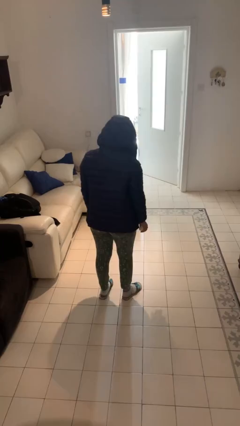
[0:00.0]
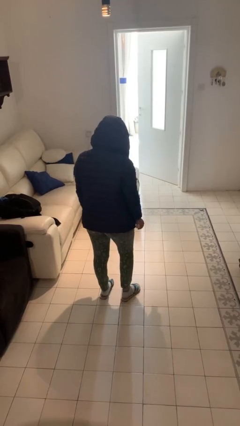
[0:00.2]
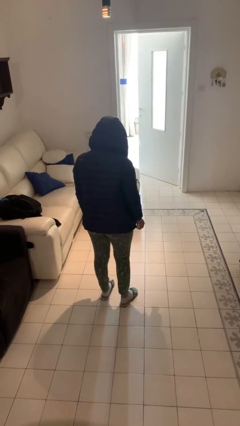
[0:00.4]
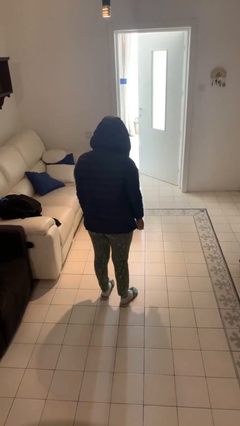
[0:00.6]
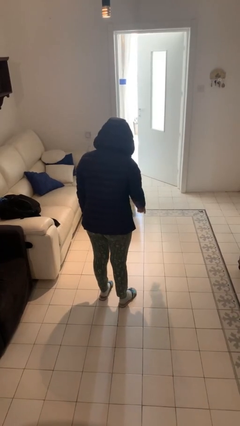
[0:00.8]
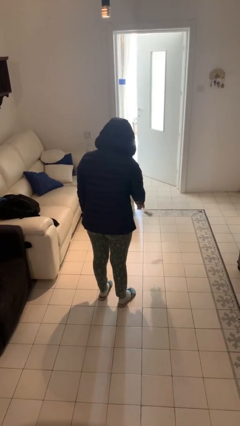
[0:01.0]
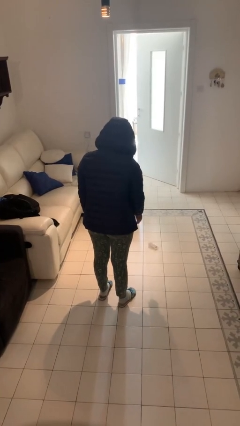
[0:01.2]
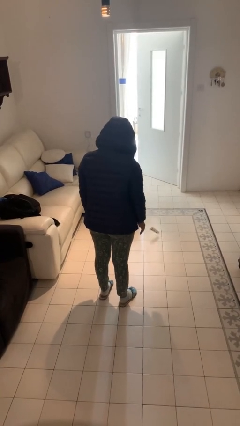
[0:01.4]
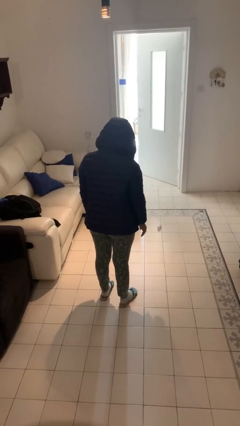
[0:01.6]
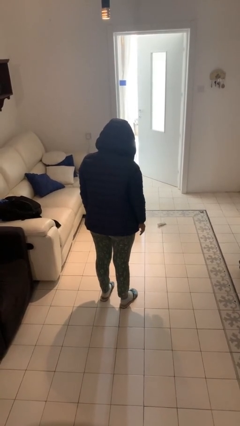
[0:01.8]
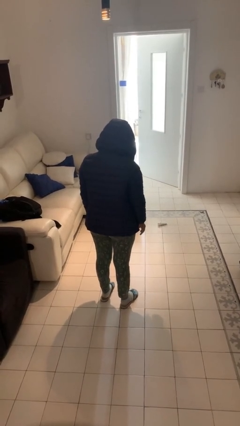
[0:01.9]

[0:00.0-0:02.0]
person throws object to ground

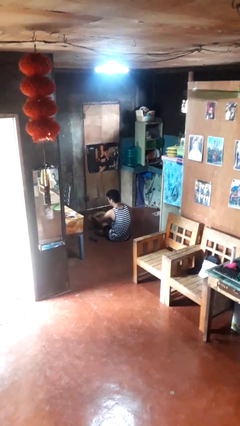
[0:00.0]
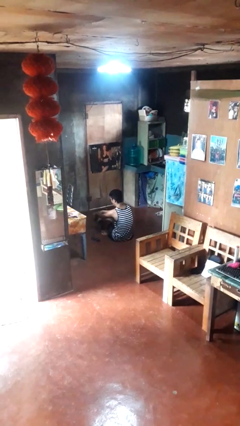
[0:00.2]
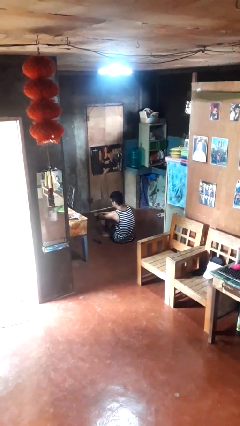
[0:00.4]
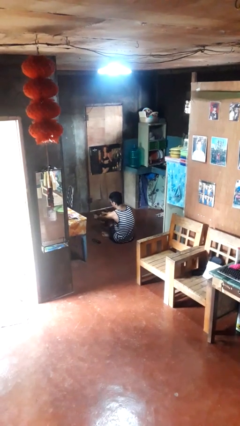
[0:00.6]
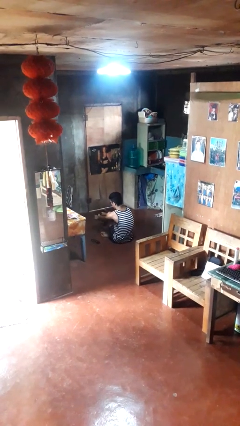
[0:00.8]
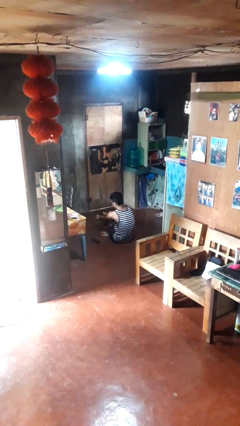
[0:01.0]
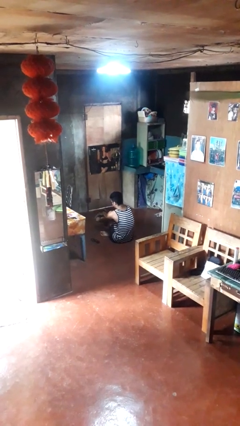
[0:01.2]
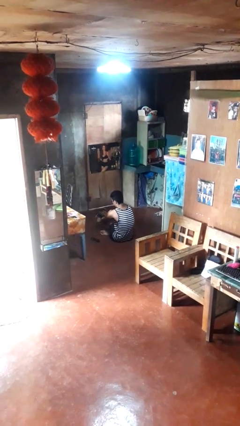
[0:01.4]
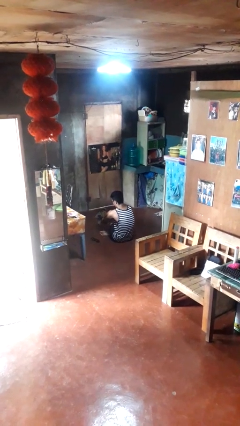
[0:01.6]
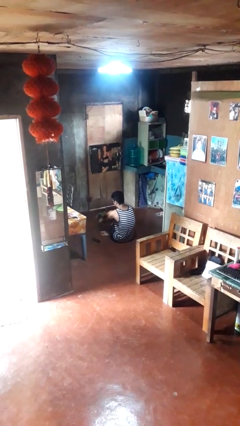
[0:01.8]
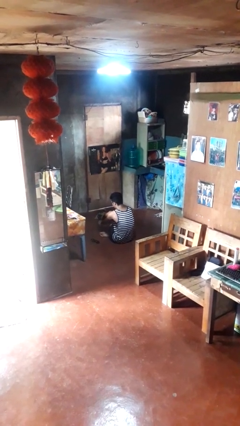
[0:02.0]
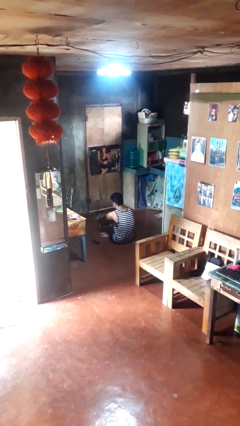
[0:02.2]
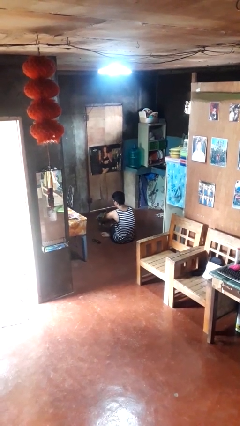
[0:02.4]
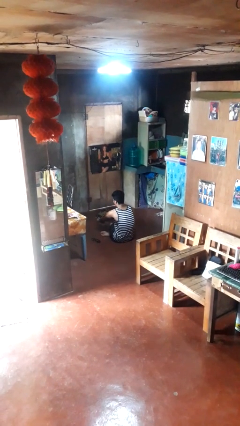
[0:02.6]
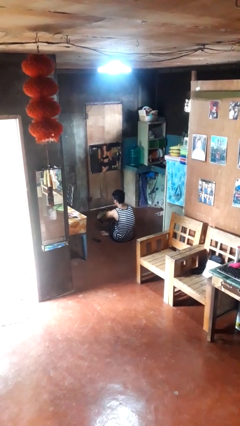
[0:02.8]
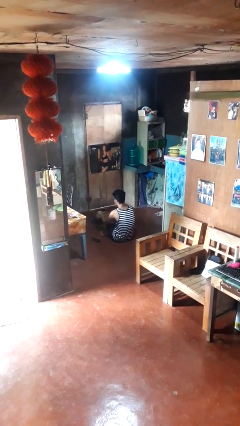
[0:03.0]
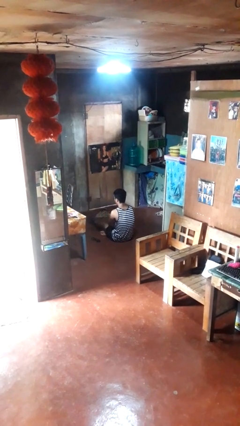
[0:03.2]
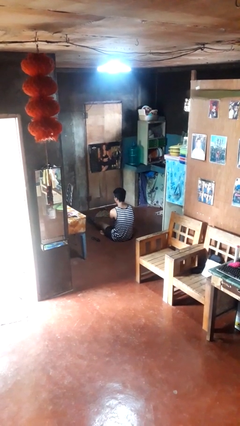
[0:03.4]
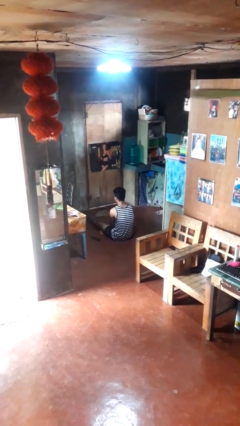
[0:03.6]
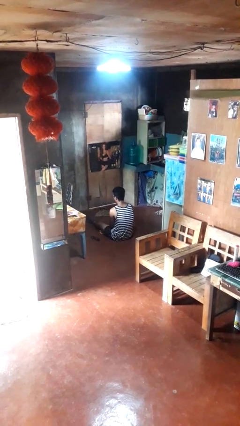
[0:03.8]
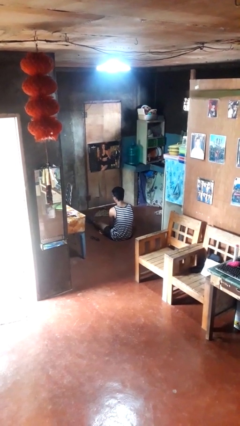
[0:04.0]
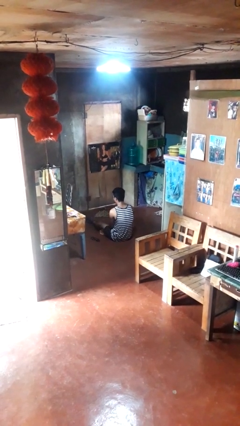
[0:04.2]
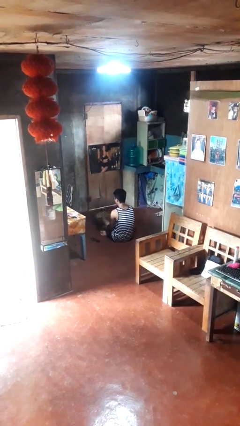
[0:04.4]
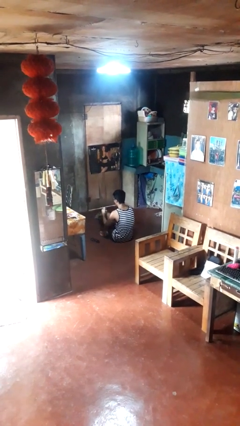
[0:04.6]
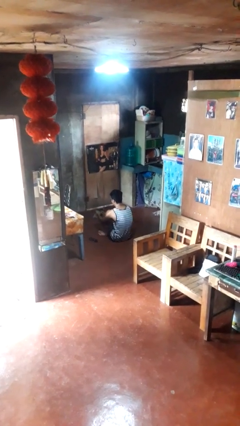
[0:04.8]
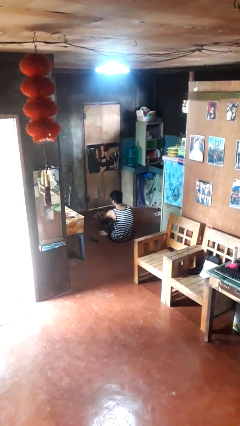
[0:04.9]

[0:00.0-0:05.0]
person puts on socks

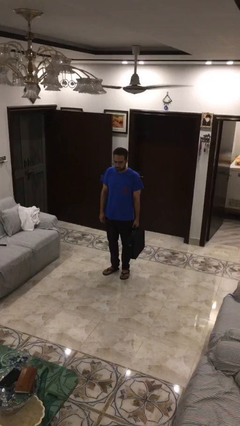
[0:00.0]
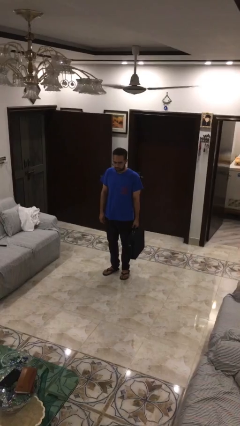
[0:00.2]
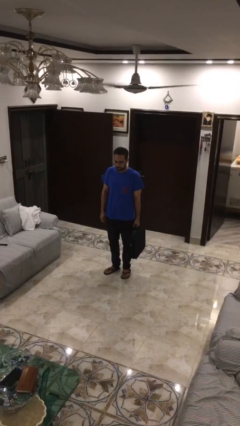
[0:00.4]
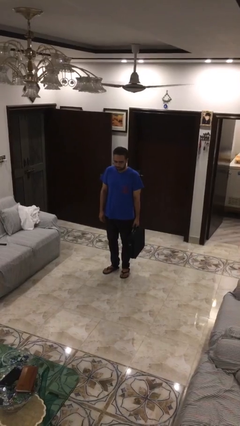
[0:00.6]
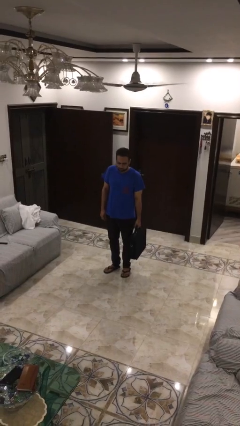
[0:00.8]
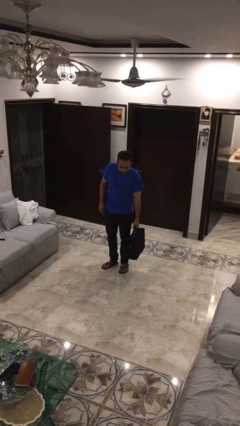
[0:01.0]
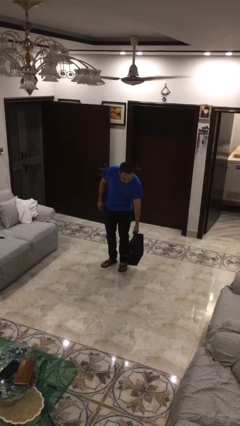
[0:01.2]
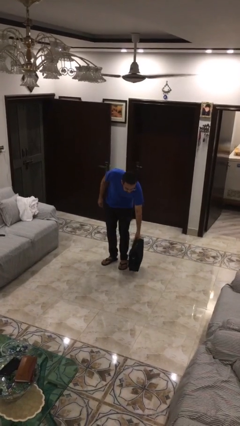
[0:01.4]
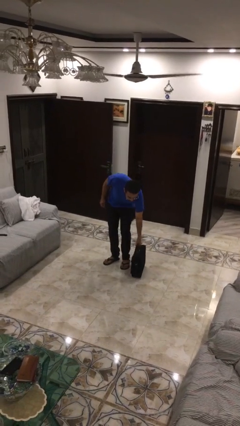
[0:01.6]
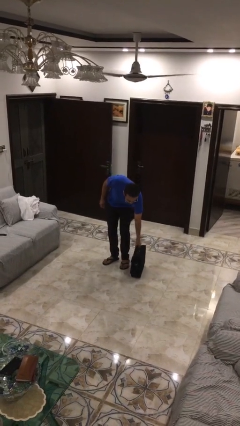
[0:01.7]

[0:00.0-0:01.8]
person puts down object on floor

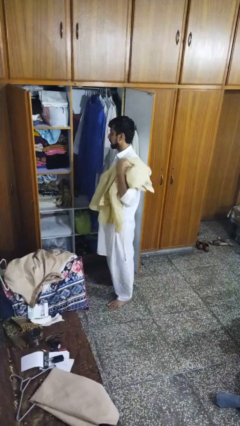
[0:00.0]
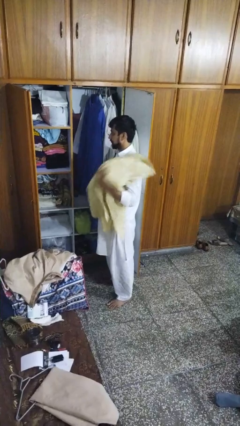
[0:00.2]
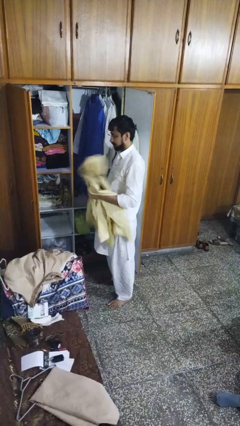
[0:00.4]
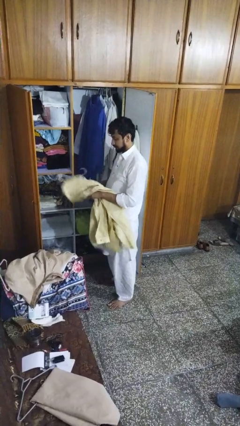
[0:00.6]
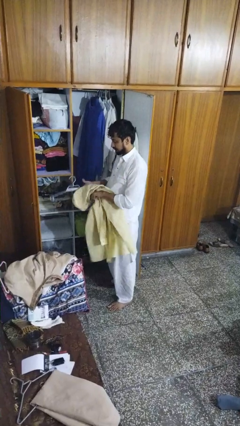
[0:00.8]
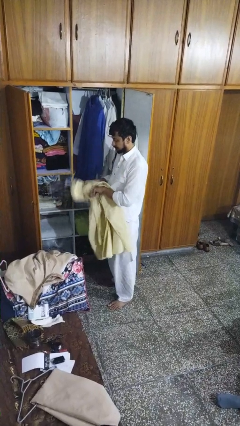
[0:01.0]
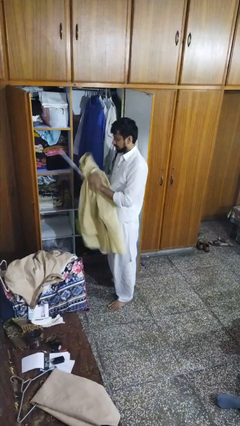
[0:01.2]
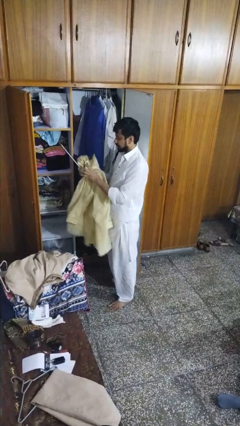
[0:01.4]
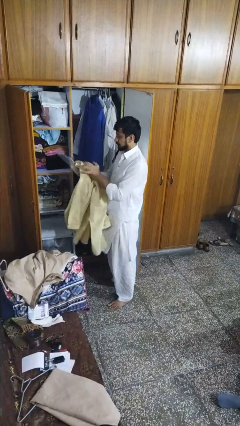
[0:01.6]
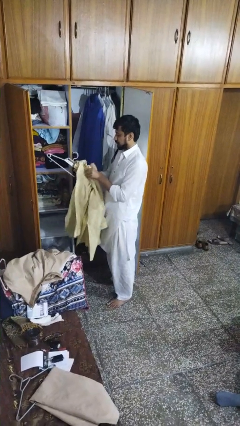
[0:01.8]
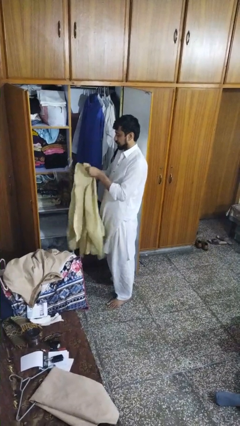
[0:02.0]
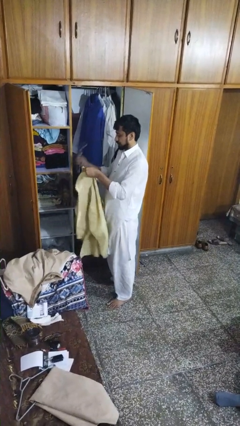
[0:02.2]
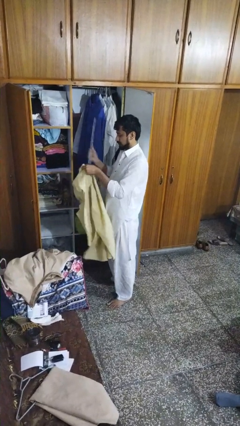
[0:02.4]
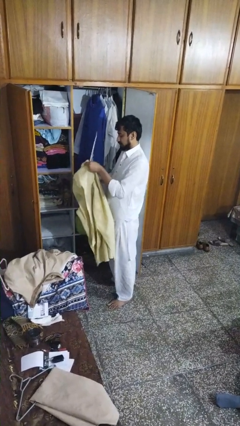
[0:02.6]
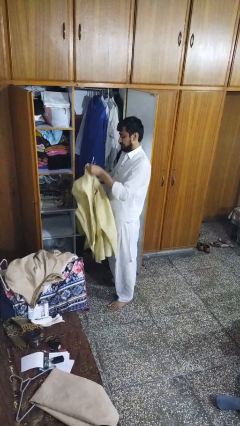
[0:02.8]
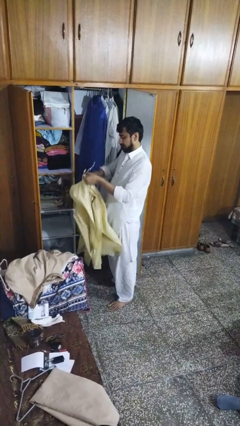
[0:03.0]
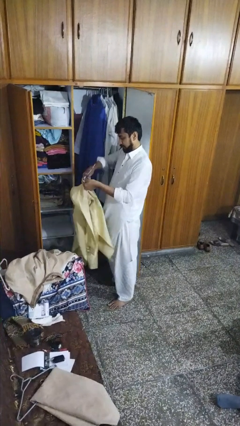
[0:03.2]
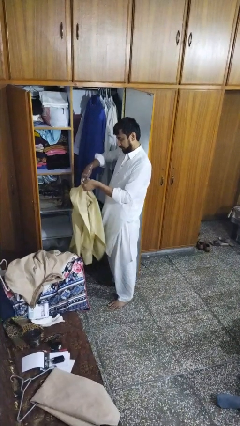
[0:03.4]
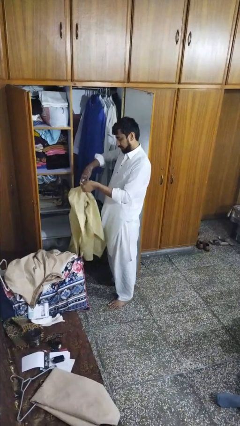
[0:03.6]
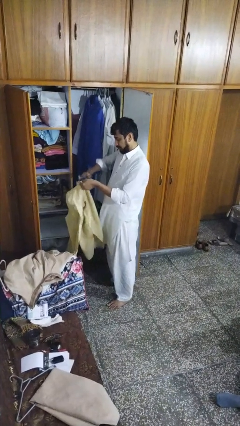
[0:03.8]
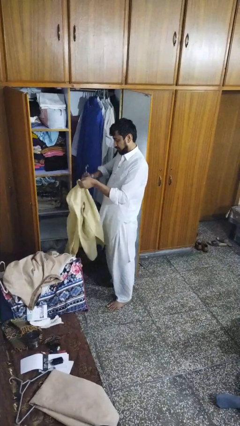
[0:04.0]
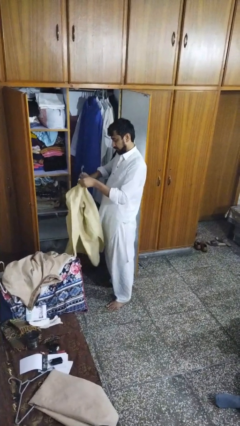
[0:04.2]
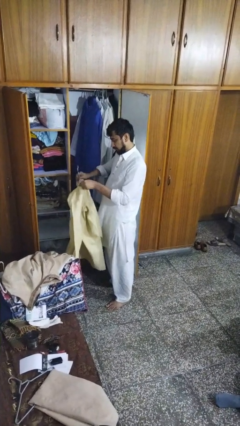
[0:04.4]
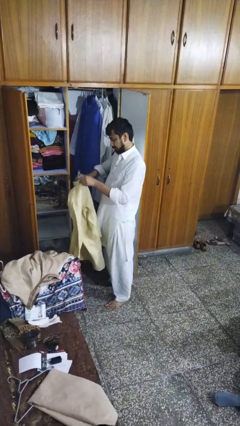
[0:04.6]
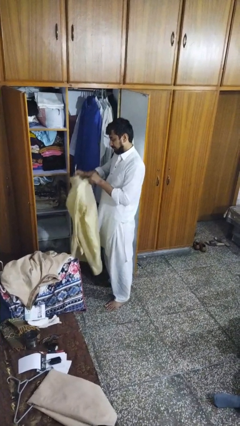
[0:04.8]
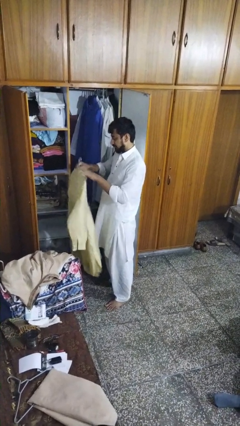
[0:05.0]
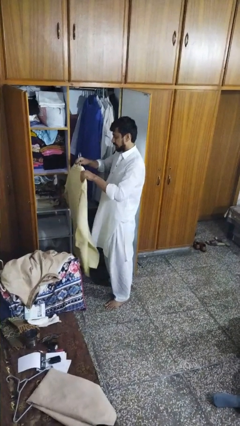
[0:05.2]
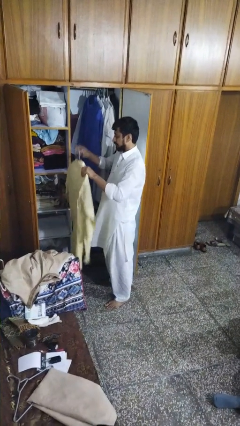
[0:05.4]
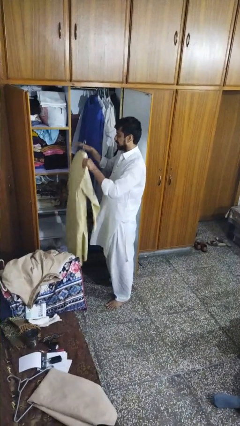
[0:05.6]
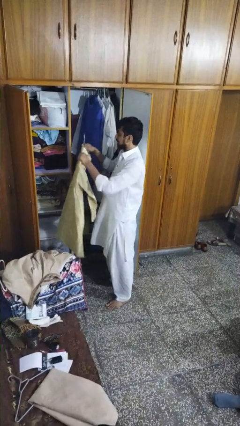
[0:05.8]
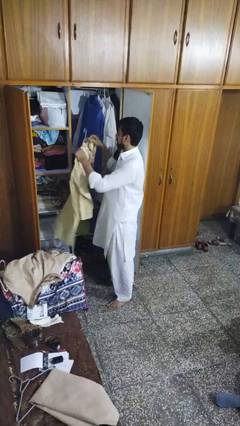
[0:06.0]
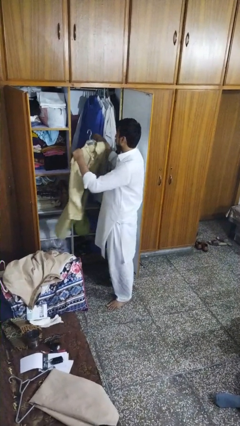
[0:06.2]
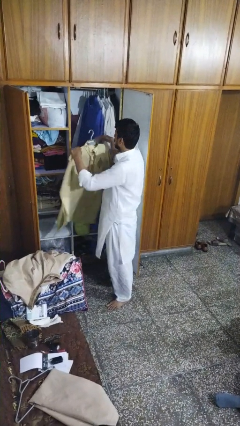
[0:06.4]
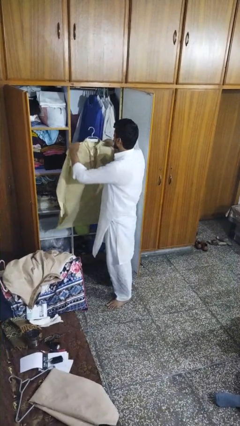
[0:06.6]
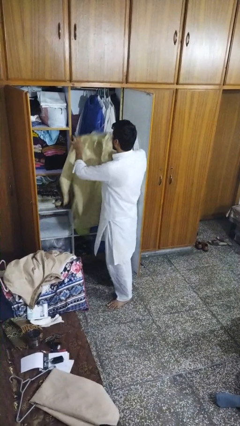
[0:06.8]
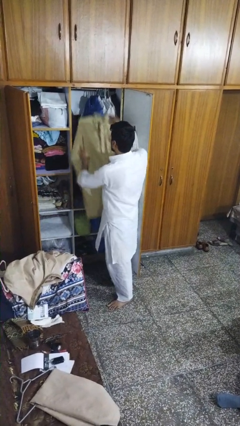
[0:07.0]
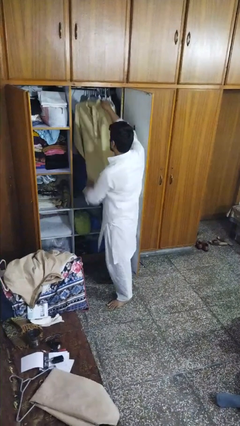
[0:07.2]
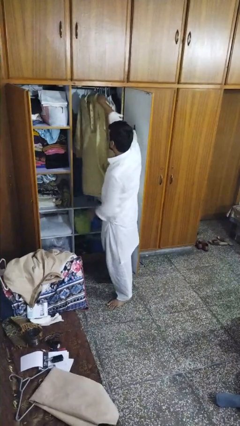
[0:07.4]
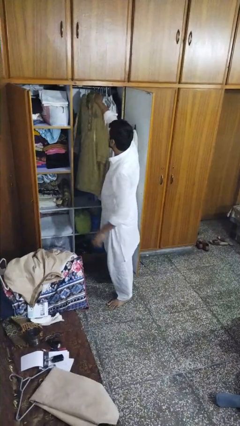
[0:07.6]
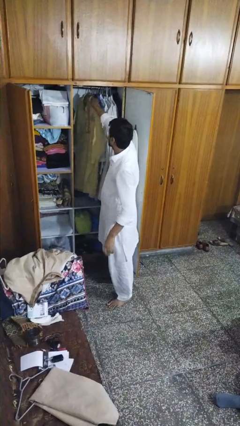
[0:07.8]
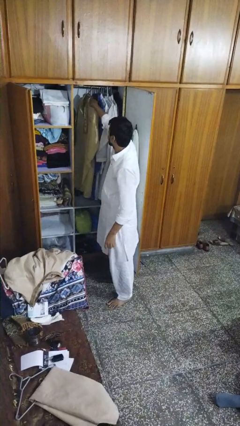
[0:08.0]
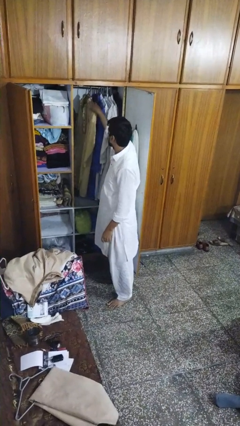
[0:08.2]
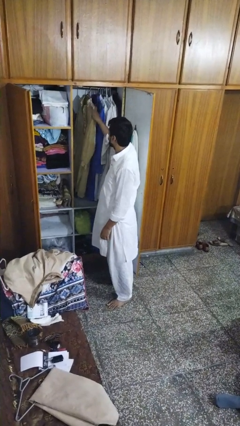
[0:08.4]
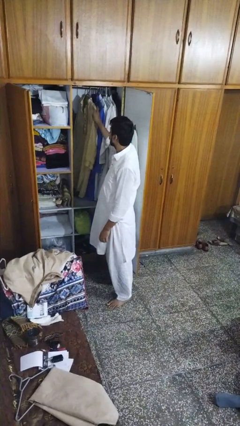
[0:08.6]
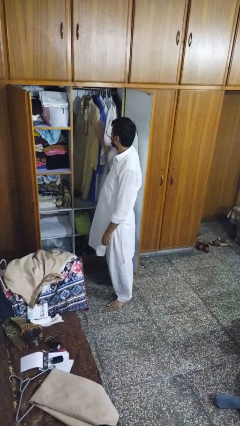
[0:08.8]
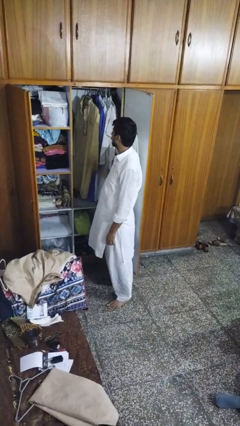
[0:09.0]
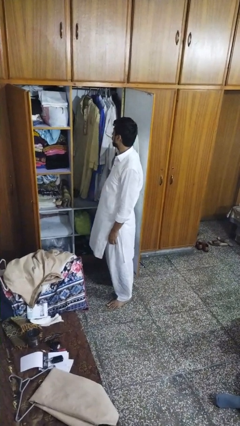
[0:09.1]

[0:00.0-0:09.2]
person puts clothes into closet

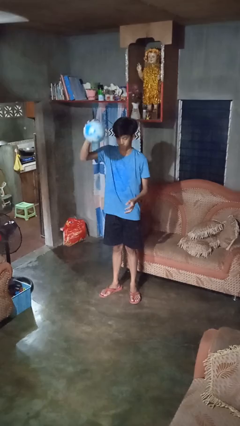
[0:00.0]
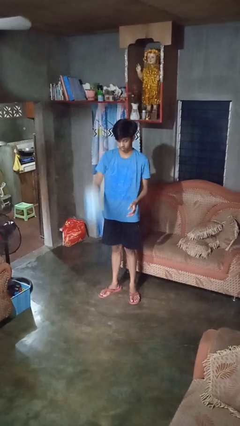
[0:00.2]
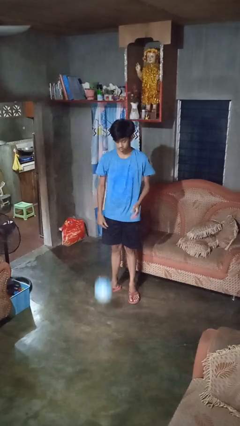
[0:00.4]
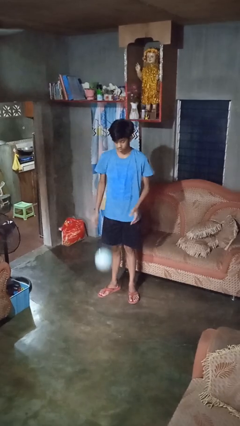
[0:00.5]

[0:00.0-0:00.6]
person bounces ball on floor
